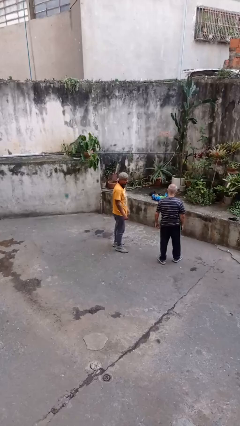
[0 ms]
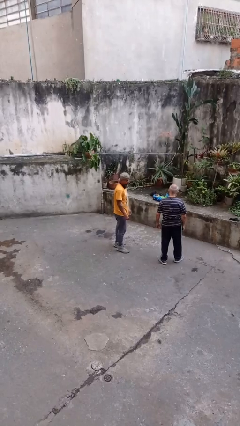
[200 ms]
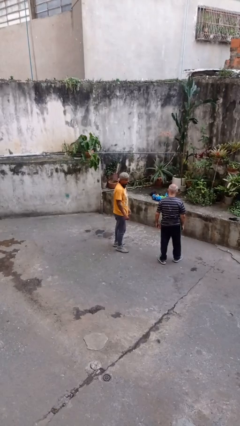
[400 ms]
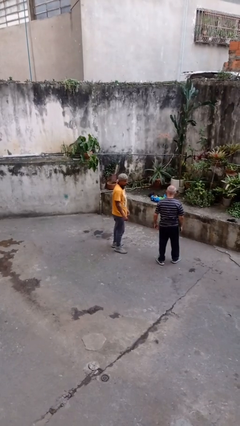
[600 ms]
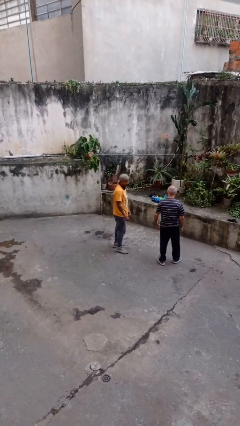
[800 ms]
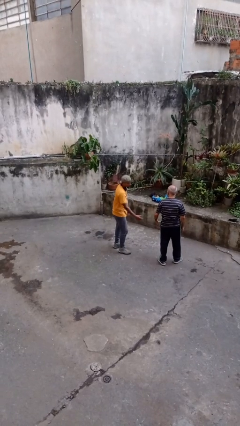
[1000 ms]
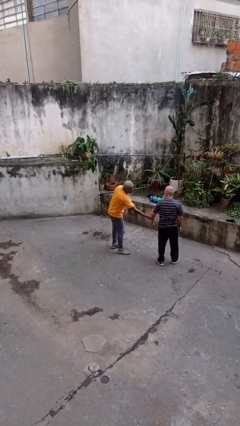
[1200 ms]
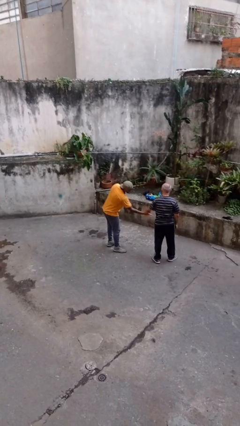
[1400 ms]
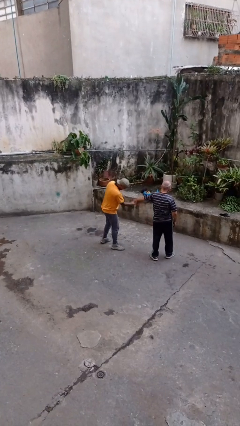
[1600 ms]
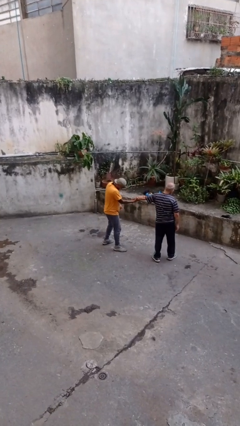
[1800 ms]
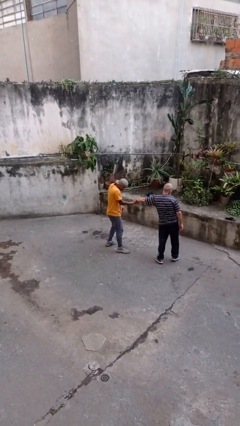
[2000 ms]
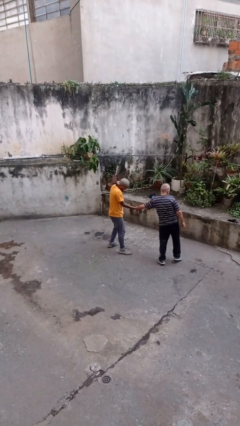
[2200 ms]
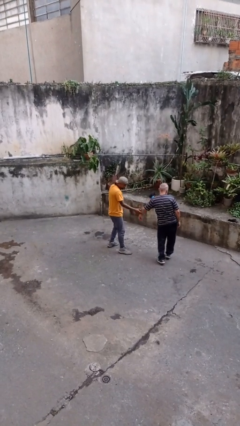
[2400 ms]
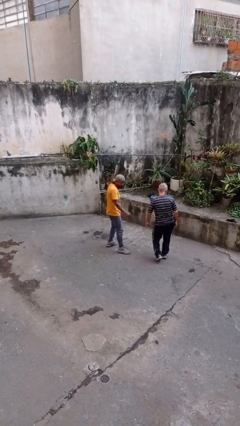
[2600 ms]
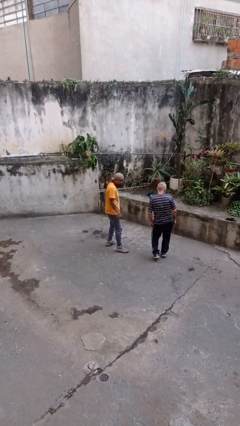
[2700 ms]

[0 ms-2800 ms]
person grabs person by forearm

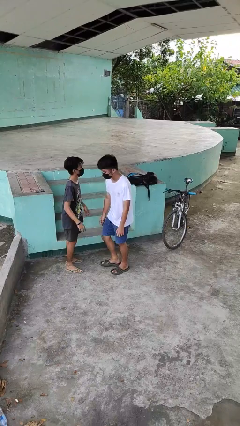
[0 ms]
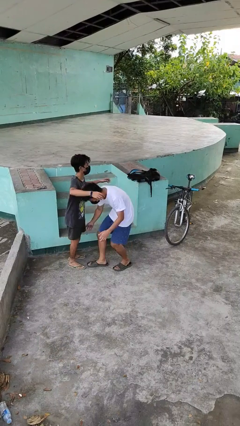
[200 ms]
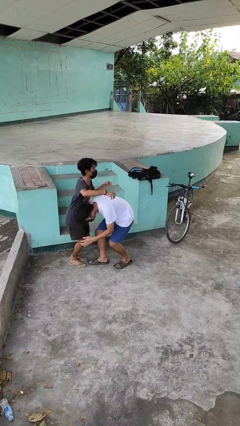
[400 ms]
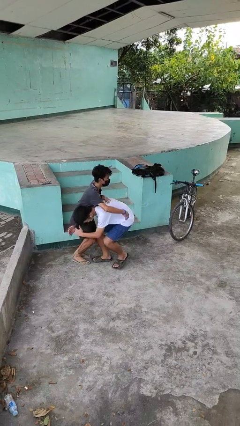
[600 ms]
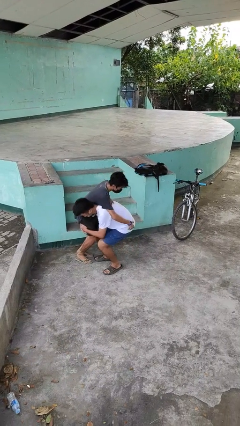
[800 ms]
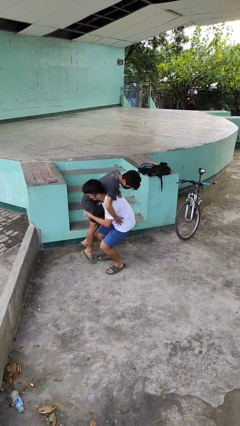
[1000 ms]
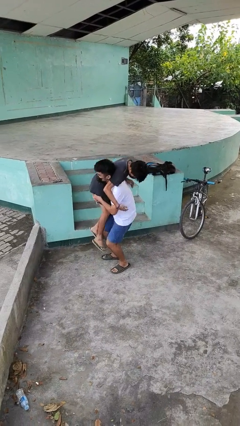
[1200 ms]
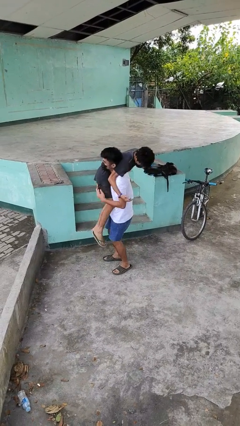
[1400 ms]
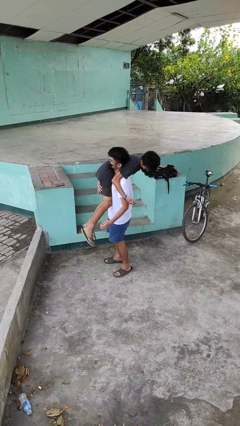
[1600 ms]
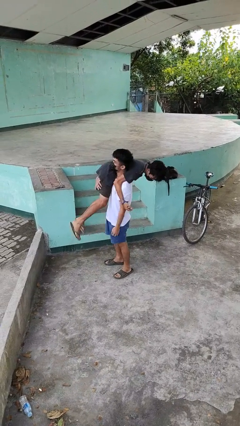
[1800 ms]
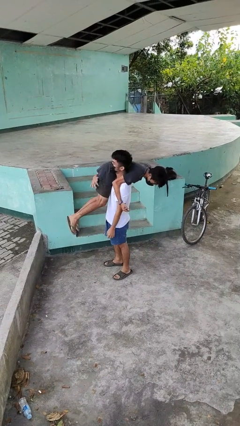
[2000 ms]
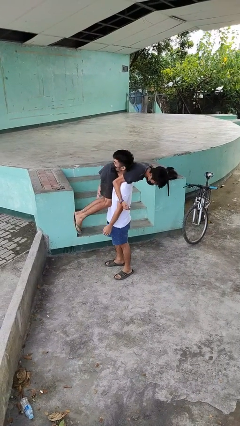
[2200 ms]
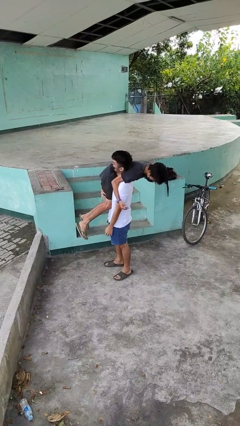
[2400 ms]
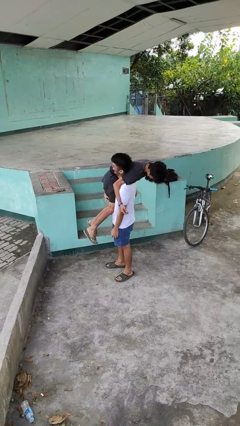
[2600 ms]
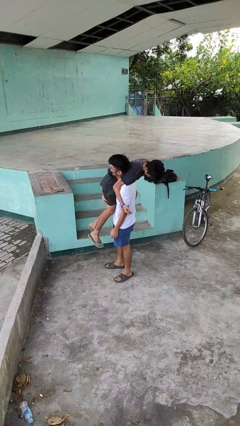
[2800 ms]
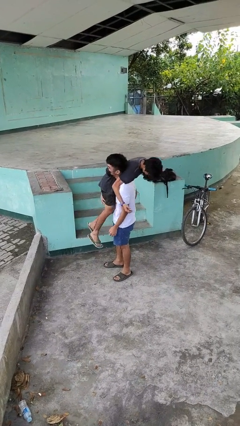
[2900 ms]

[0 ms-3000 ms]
person carries person over shoulder

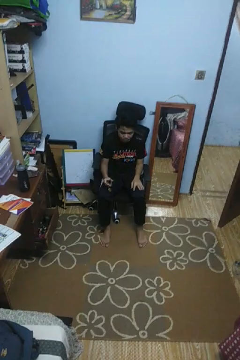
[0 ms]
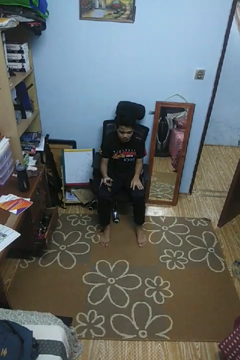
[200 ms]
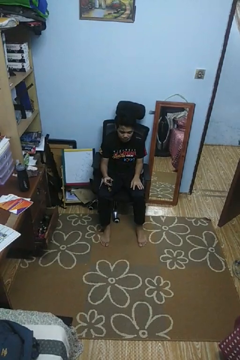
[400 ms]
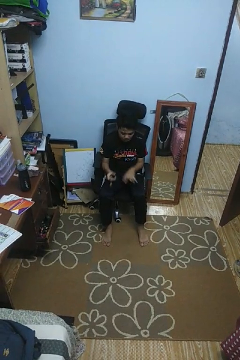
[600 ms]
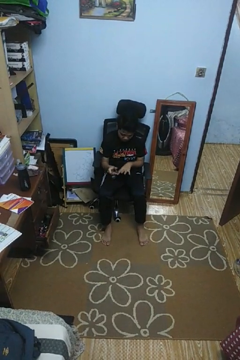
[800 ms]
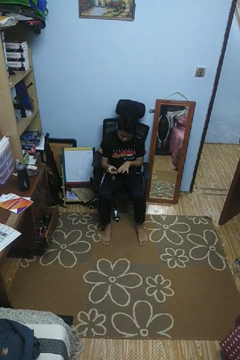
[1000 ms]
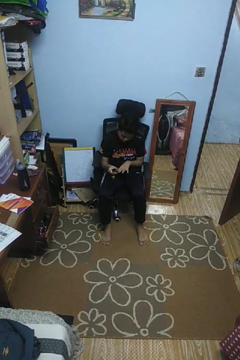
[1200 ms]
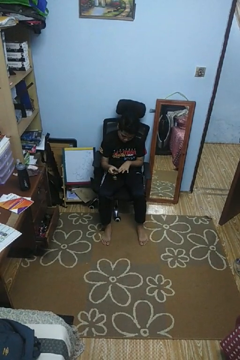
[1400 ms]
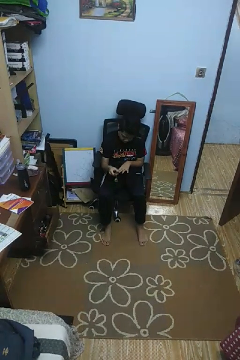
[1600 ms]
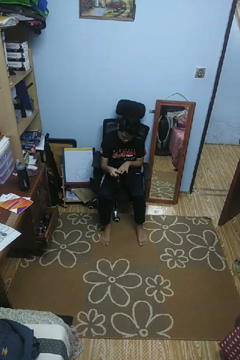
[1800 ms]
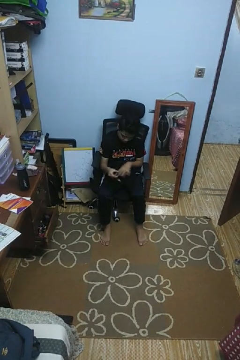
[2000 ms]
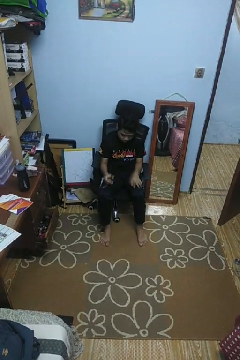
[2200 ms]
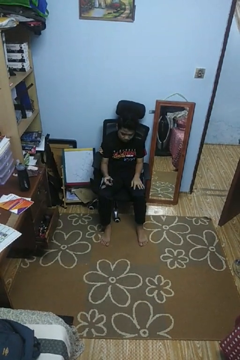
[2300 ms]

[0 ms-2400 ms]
person clips fingernails

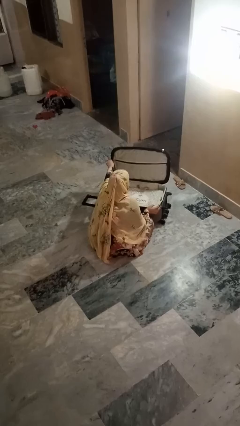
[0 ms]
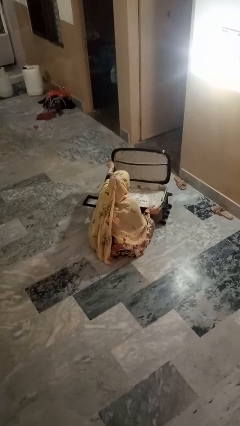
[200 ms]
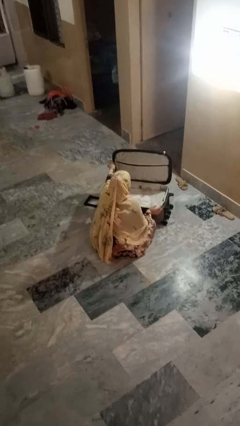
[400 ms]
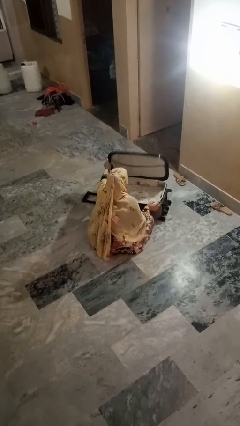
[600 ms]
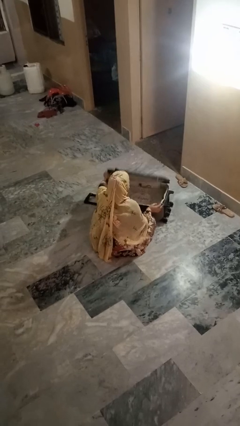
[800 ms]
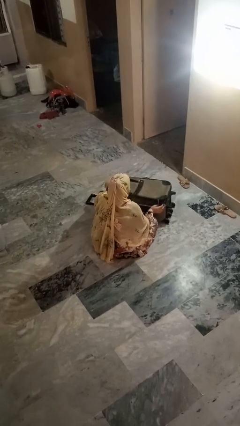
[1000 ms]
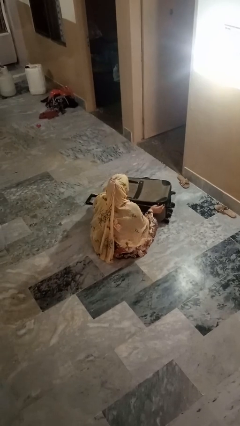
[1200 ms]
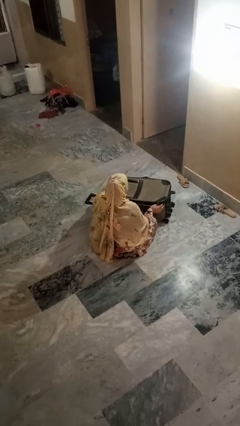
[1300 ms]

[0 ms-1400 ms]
person closes suitcase

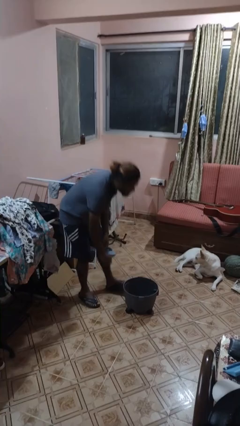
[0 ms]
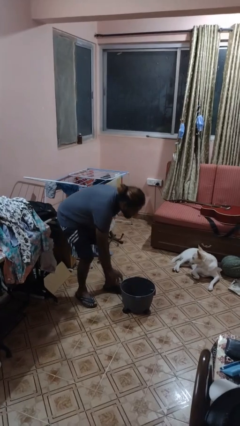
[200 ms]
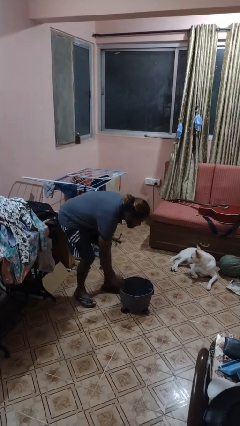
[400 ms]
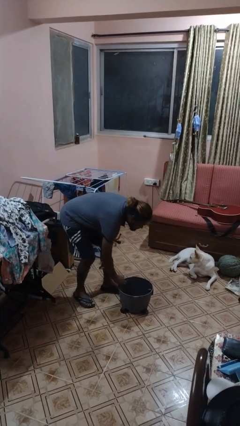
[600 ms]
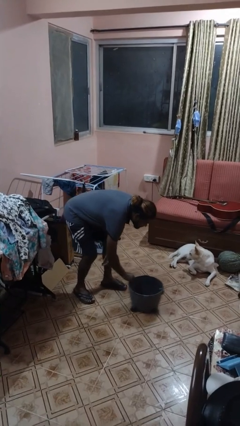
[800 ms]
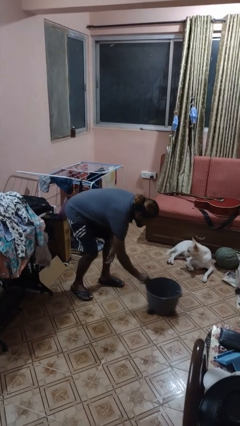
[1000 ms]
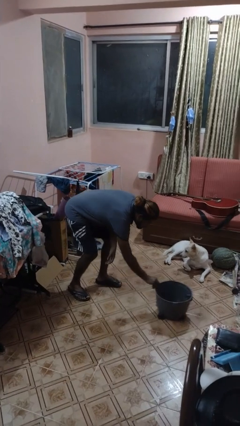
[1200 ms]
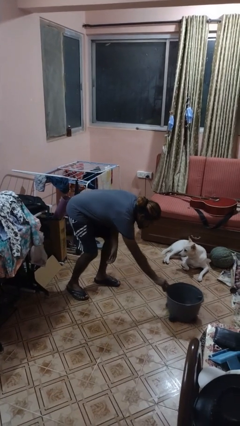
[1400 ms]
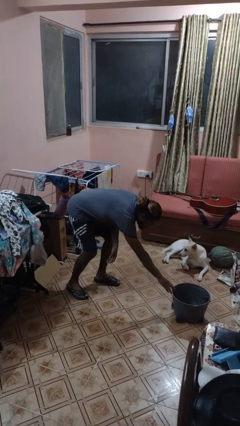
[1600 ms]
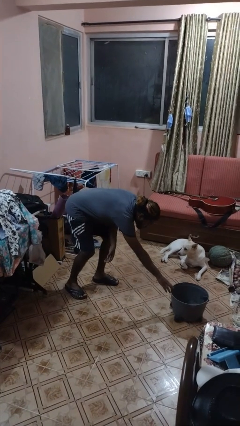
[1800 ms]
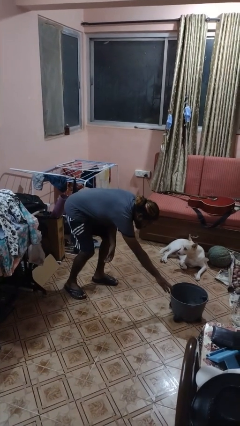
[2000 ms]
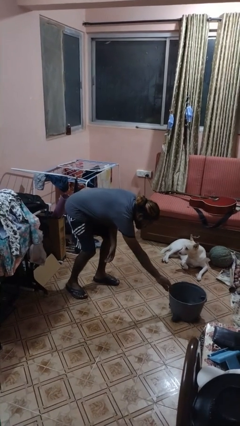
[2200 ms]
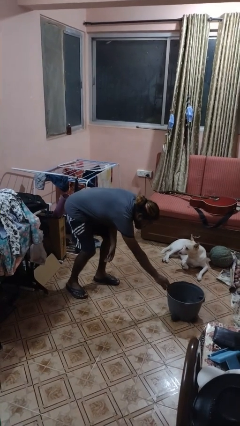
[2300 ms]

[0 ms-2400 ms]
person pushes wheeled cart

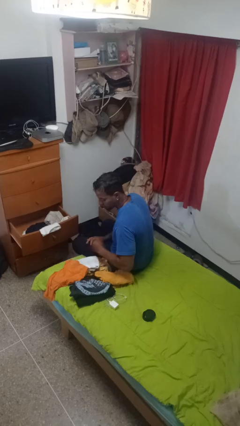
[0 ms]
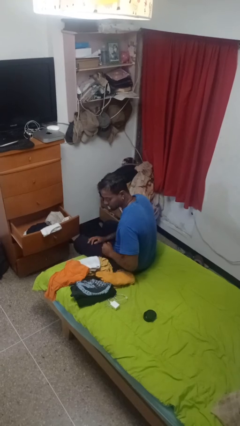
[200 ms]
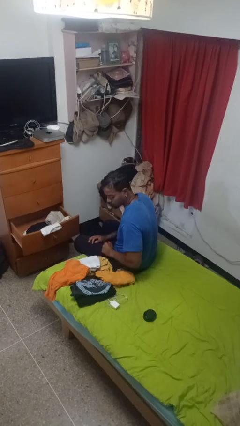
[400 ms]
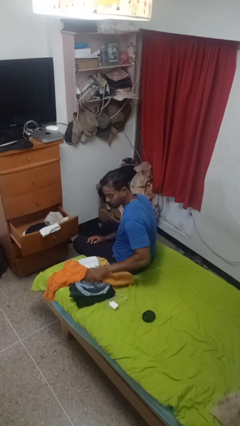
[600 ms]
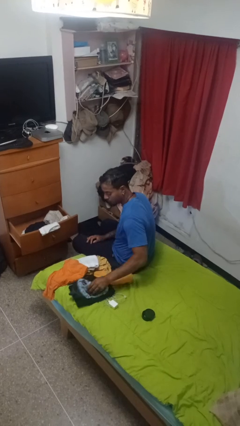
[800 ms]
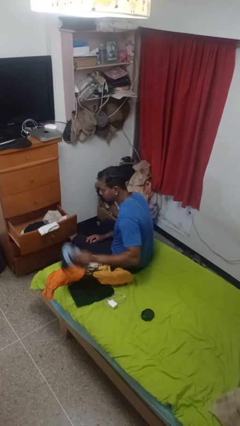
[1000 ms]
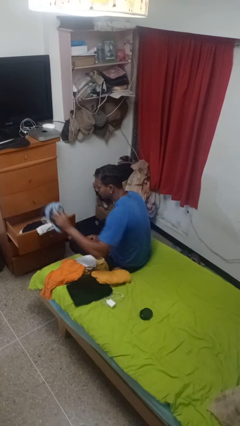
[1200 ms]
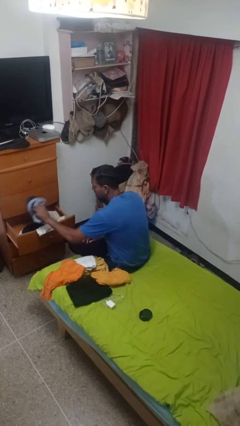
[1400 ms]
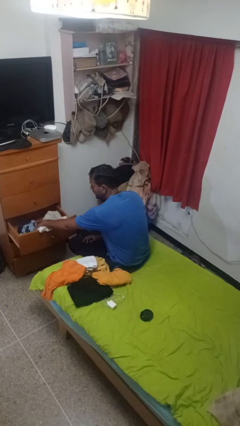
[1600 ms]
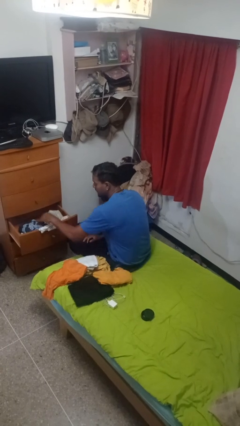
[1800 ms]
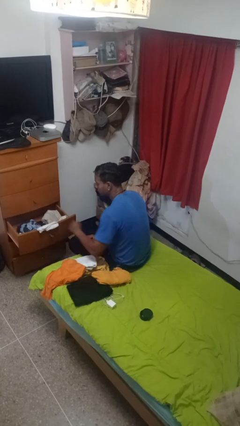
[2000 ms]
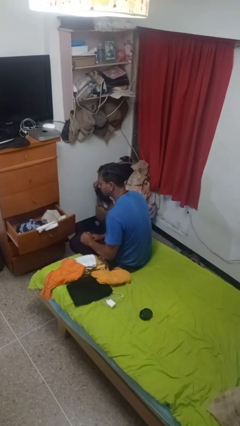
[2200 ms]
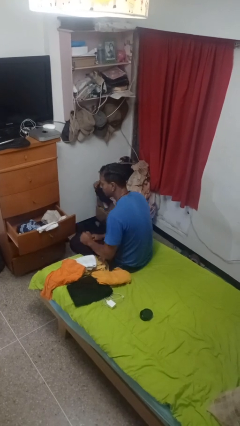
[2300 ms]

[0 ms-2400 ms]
person puts clothes into dresser

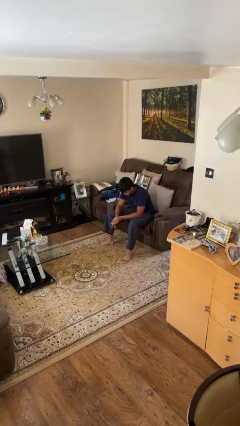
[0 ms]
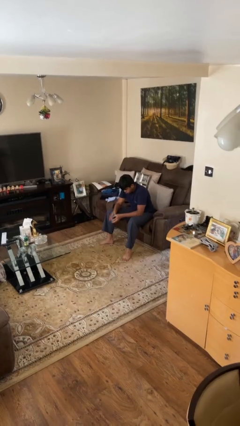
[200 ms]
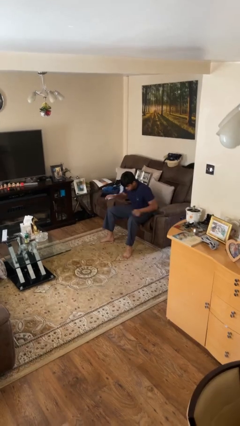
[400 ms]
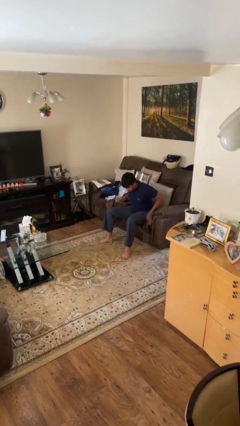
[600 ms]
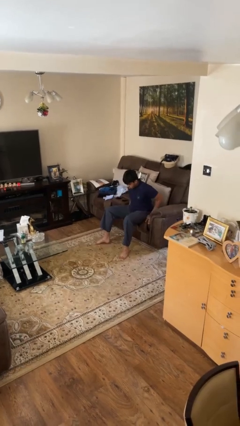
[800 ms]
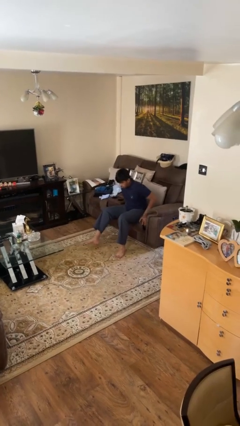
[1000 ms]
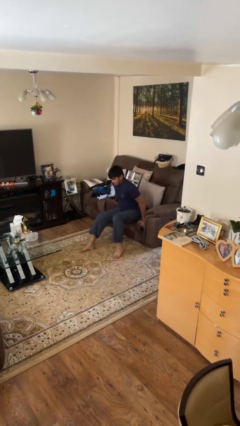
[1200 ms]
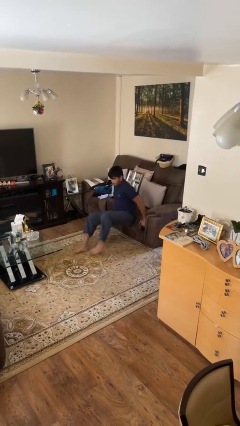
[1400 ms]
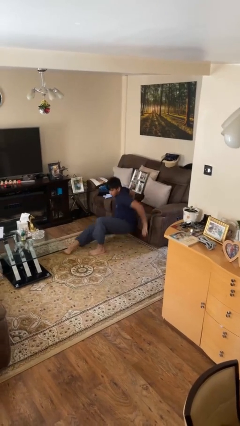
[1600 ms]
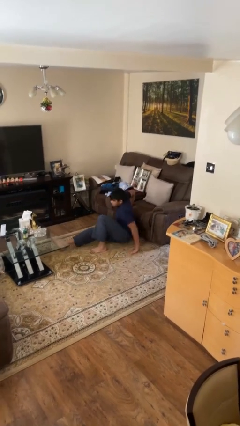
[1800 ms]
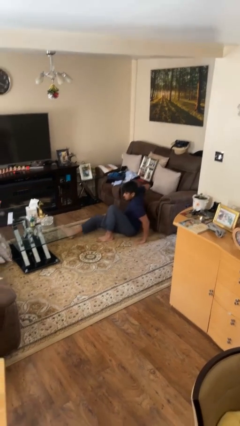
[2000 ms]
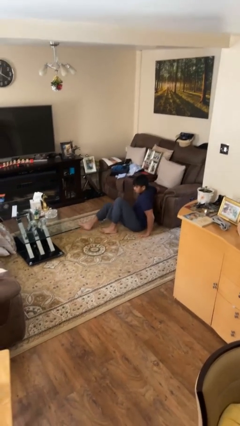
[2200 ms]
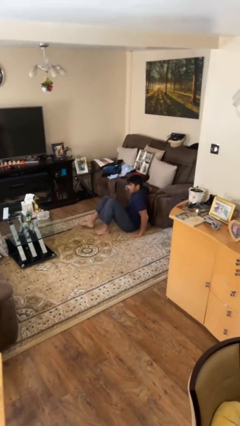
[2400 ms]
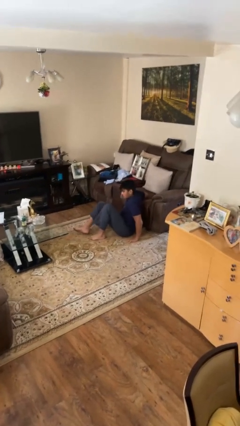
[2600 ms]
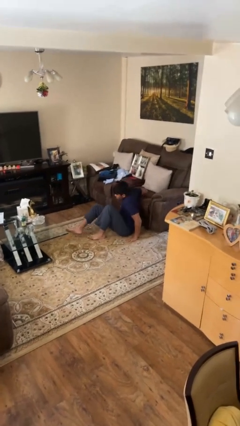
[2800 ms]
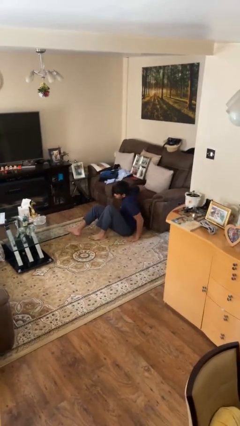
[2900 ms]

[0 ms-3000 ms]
person falls from chair
